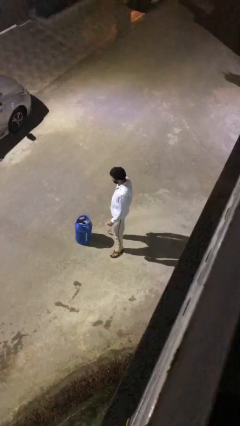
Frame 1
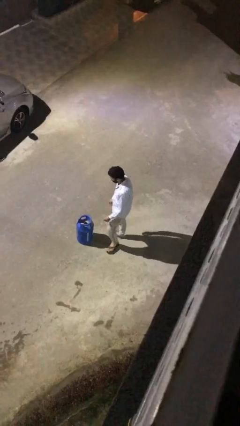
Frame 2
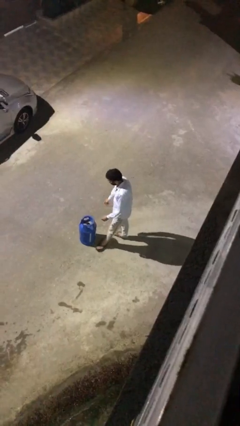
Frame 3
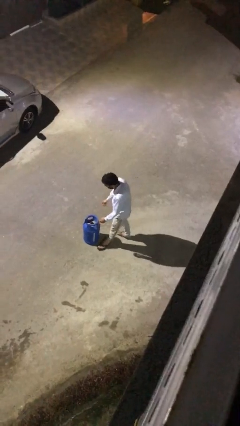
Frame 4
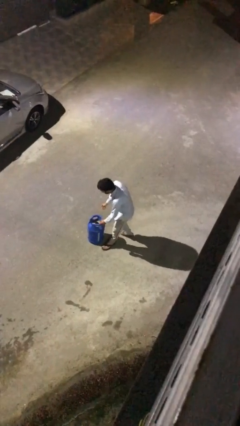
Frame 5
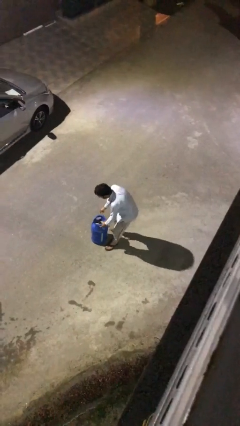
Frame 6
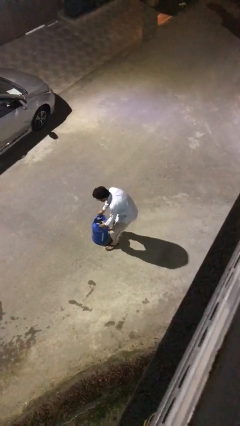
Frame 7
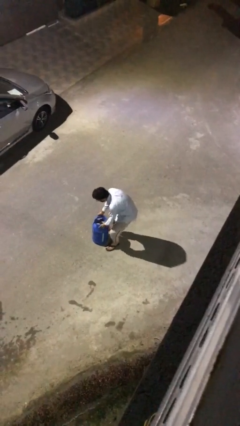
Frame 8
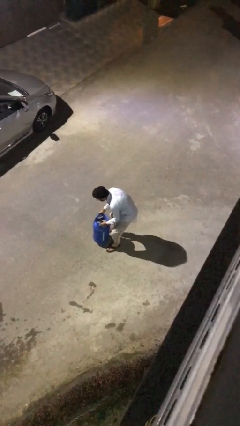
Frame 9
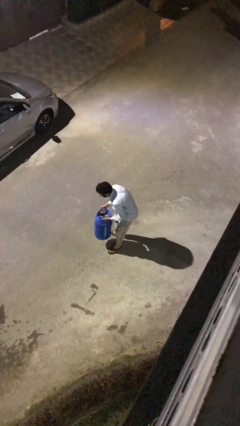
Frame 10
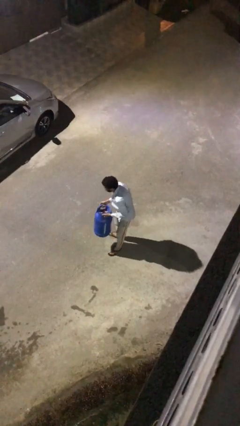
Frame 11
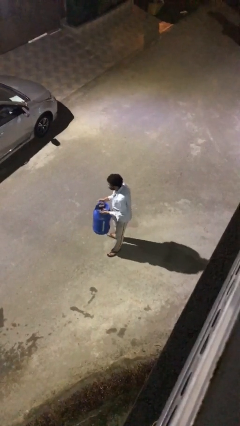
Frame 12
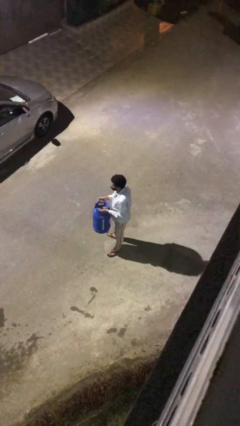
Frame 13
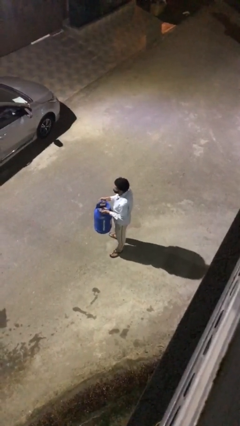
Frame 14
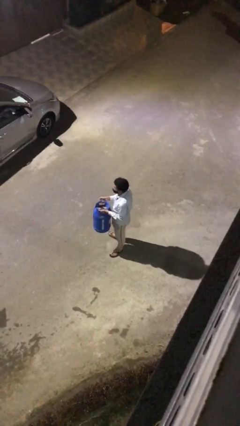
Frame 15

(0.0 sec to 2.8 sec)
person picks up object from floor

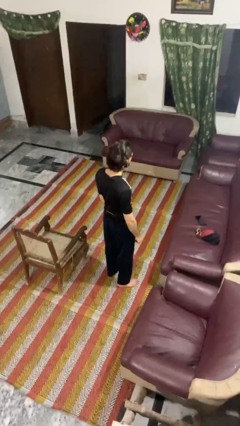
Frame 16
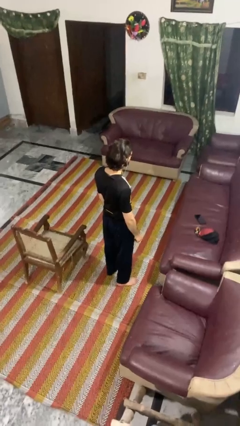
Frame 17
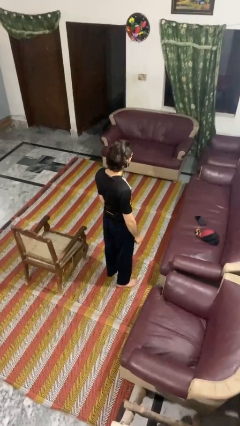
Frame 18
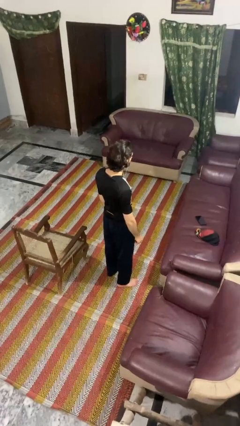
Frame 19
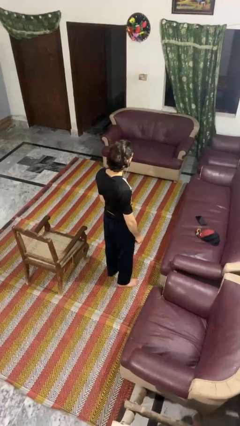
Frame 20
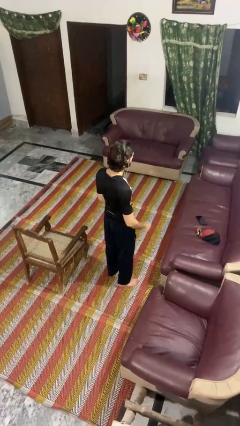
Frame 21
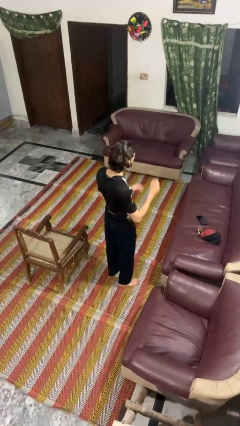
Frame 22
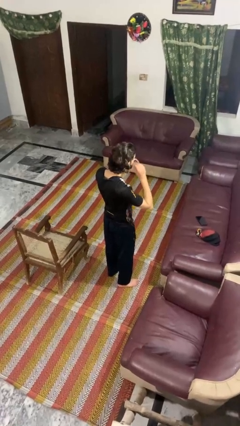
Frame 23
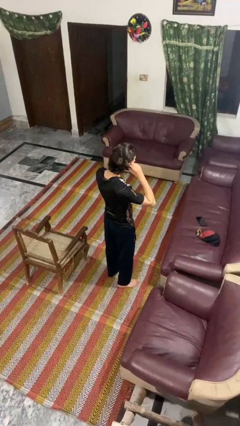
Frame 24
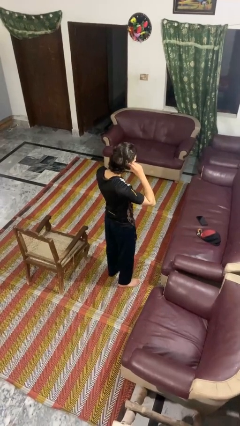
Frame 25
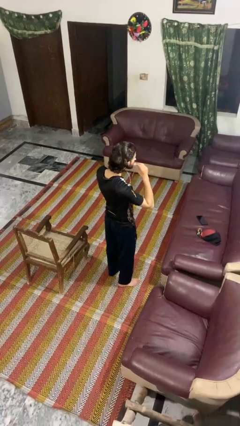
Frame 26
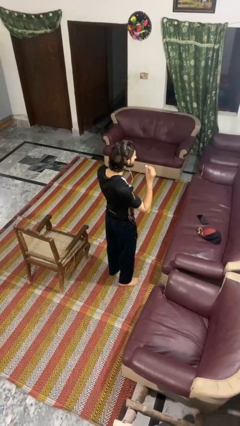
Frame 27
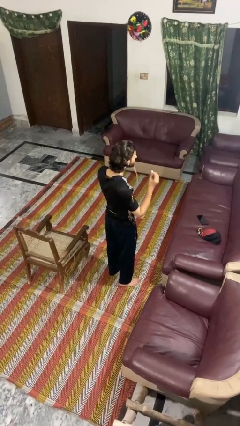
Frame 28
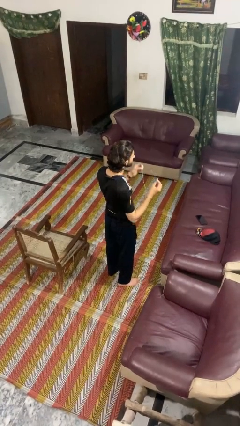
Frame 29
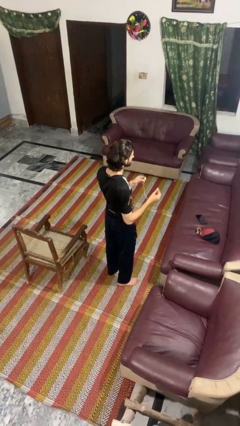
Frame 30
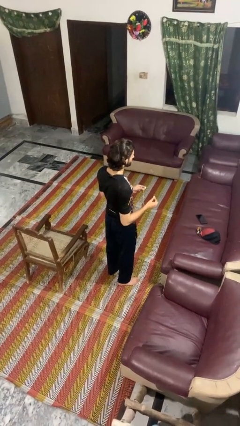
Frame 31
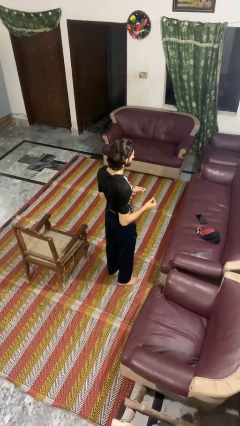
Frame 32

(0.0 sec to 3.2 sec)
person takes off headphones

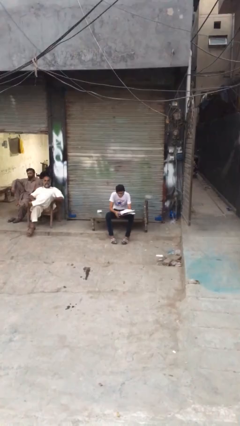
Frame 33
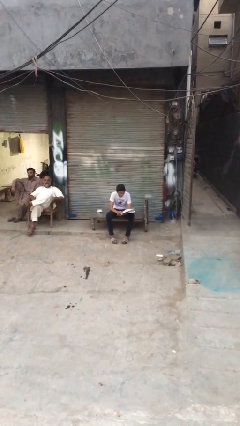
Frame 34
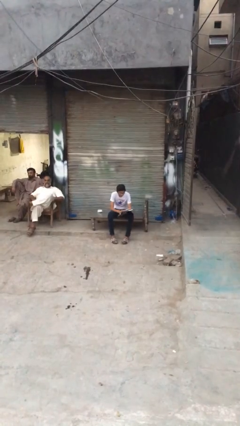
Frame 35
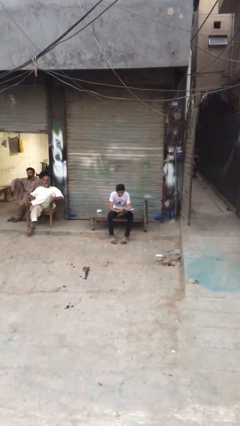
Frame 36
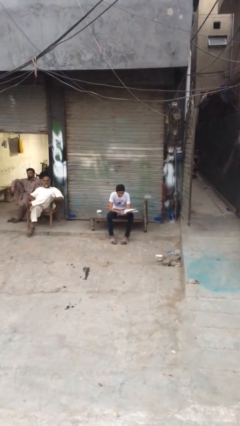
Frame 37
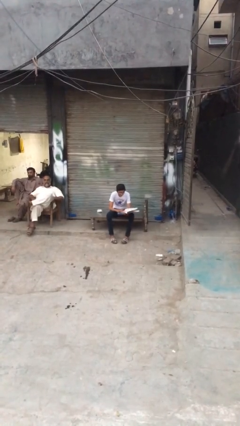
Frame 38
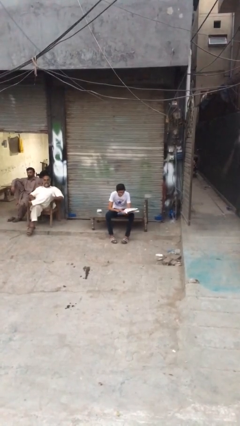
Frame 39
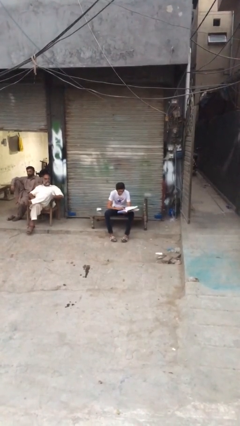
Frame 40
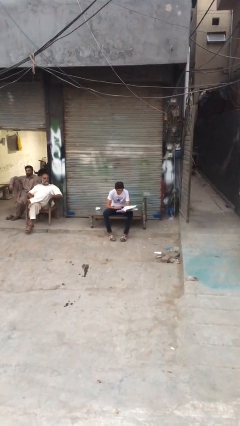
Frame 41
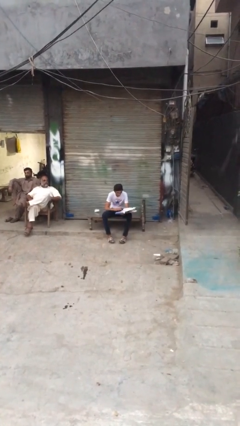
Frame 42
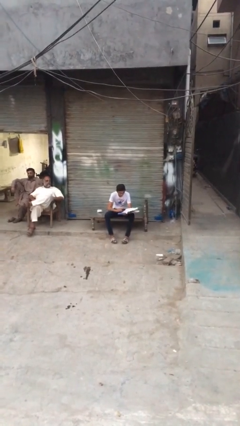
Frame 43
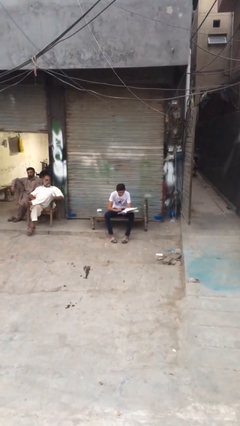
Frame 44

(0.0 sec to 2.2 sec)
person reads document

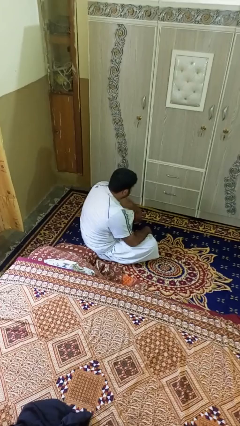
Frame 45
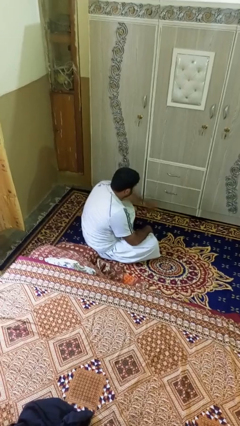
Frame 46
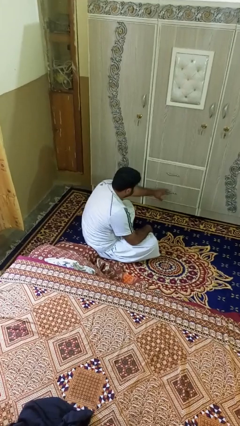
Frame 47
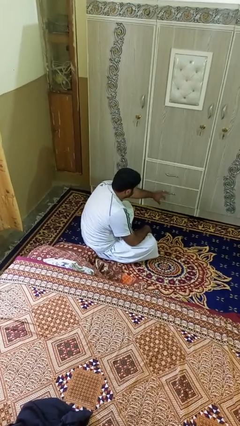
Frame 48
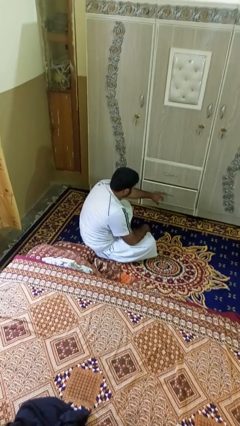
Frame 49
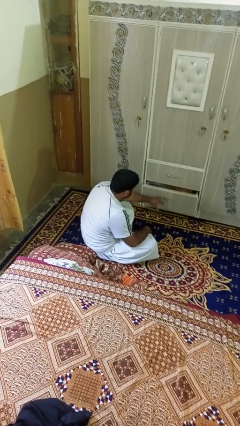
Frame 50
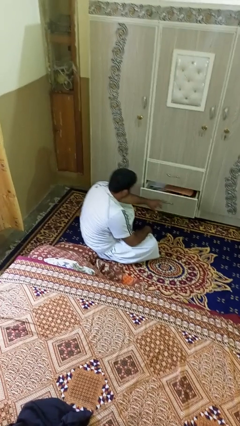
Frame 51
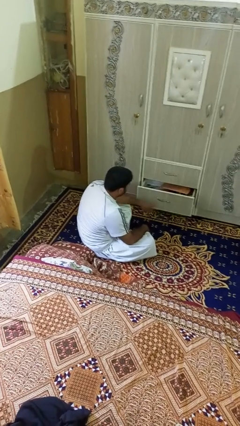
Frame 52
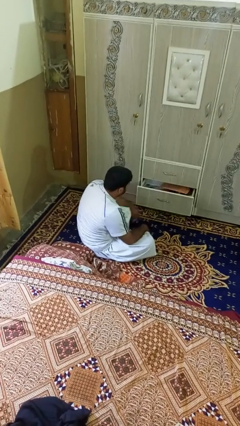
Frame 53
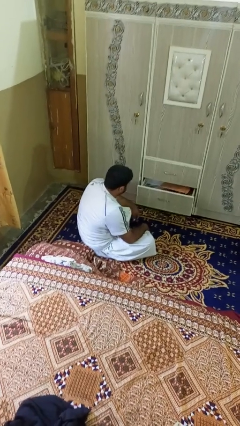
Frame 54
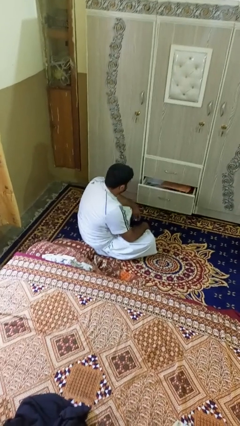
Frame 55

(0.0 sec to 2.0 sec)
person opens dresser drawer

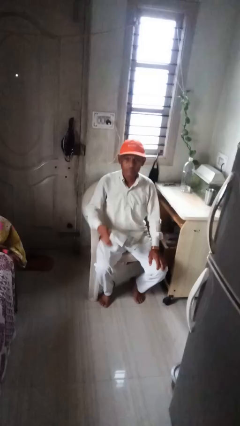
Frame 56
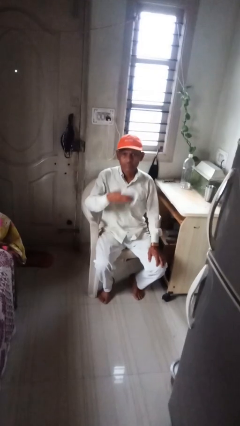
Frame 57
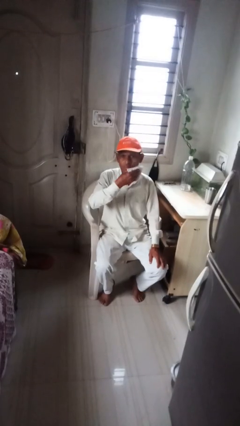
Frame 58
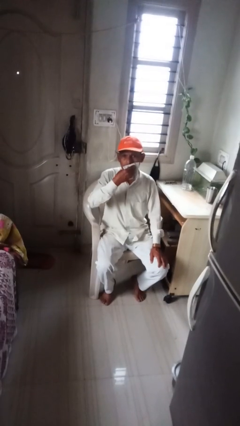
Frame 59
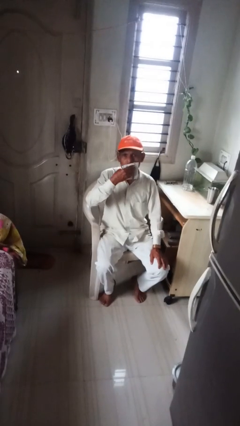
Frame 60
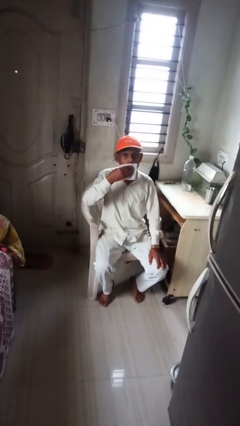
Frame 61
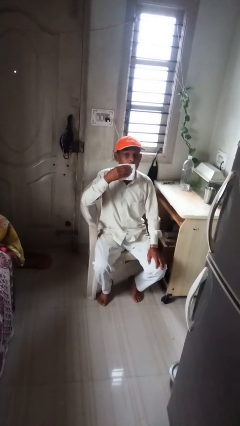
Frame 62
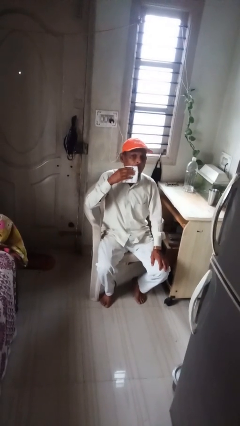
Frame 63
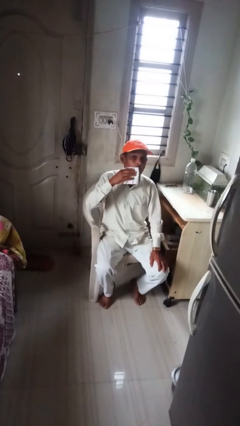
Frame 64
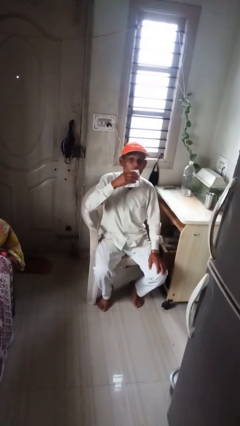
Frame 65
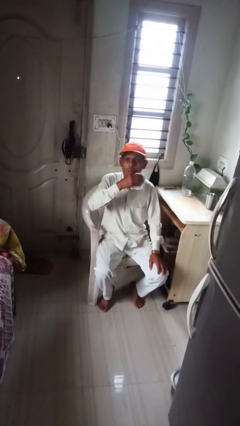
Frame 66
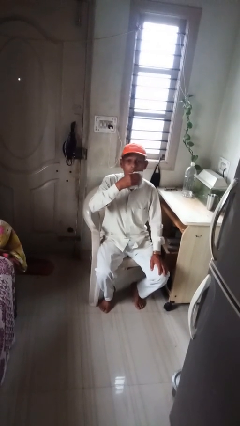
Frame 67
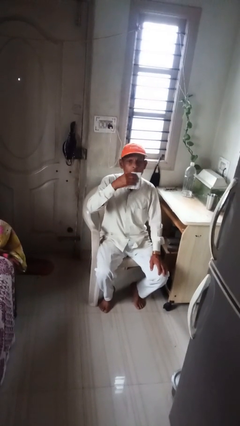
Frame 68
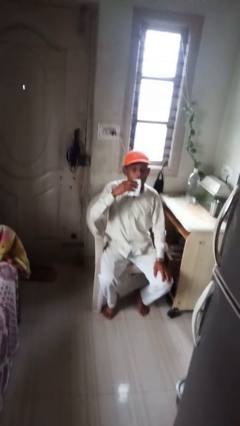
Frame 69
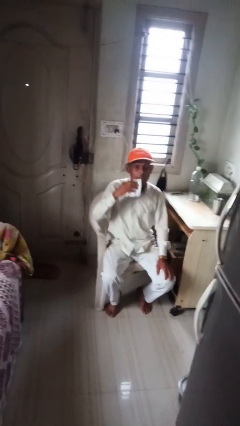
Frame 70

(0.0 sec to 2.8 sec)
person wipes mouth with napkin

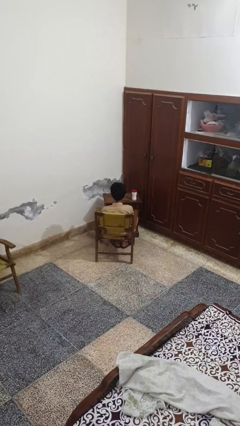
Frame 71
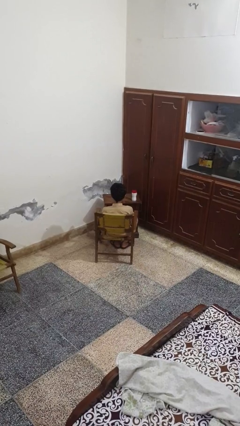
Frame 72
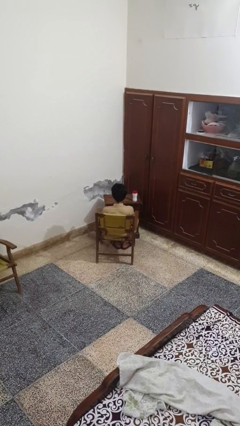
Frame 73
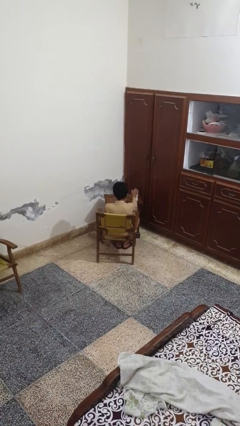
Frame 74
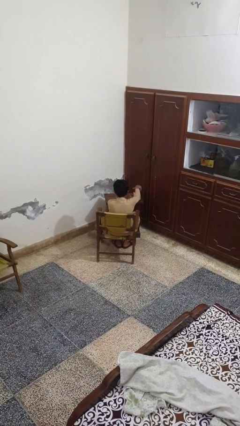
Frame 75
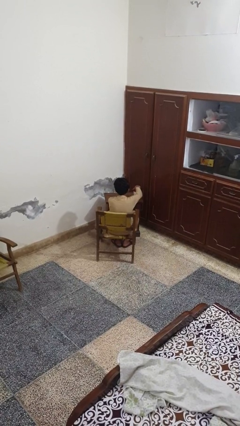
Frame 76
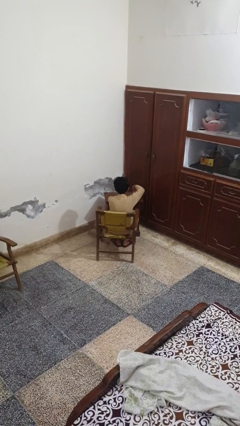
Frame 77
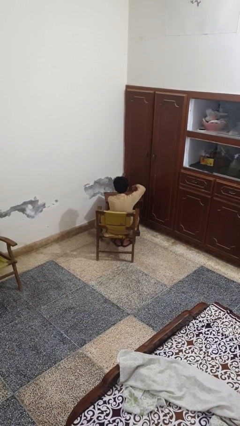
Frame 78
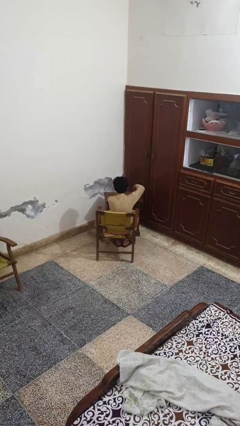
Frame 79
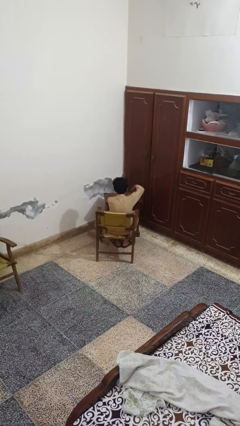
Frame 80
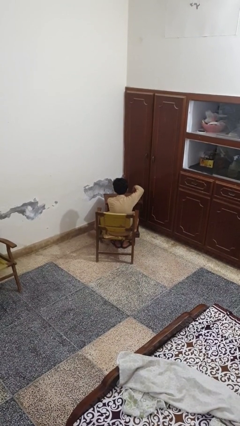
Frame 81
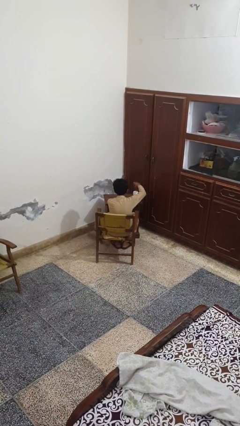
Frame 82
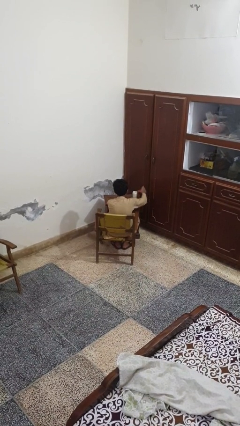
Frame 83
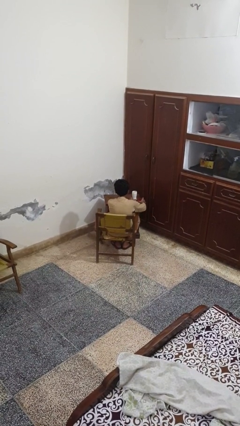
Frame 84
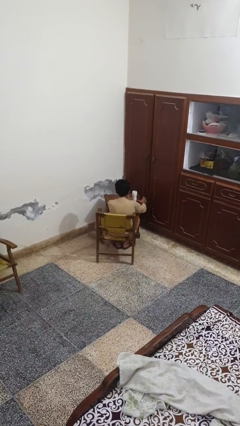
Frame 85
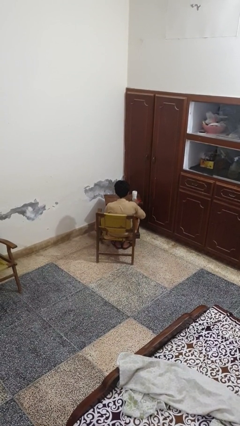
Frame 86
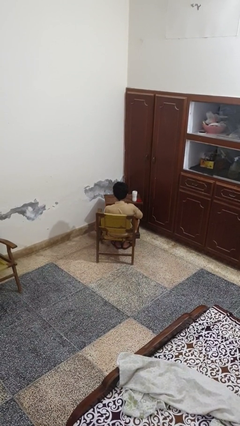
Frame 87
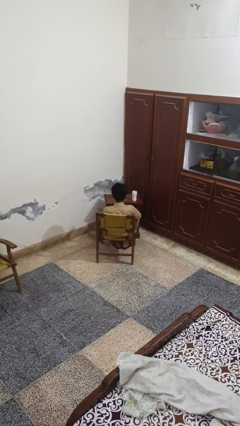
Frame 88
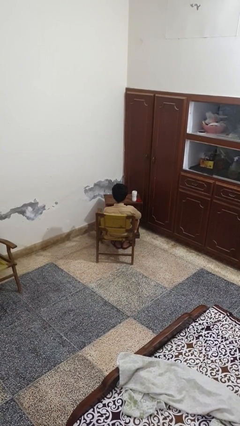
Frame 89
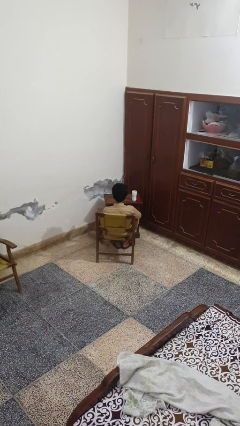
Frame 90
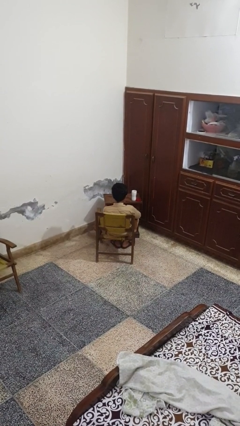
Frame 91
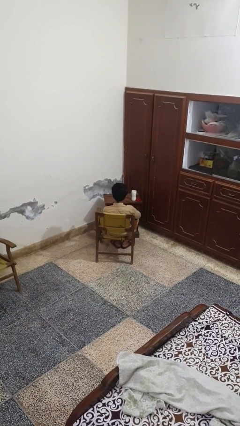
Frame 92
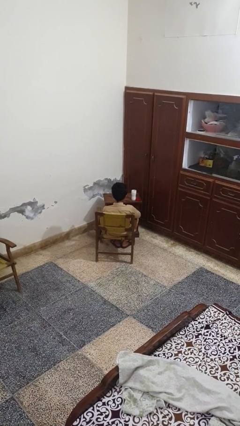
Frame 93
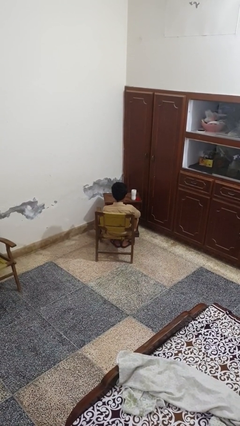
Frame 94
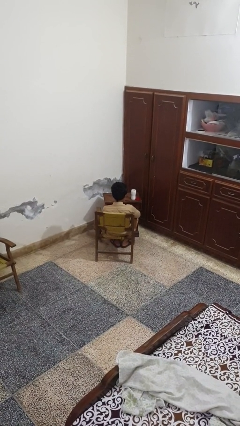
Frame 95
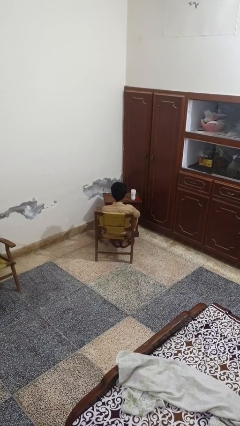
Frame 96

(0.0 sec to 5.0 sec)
person opens jar
